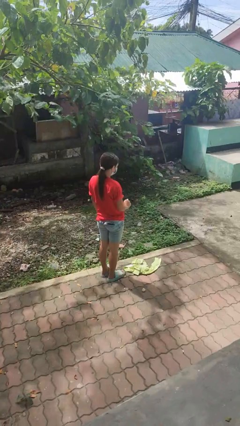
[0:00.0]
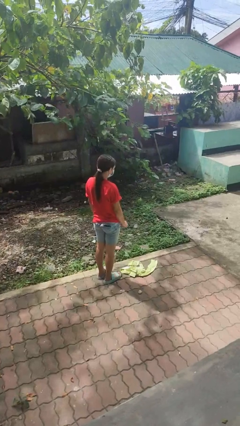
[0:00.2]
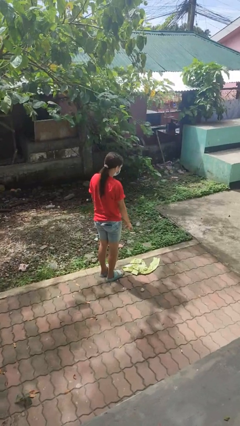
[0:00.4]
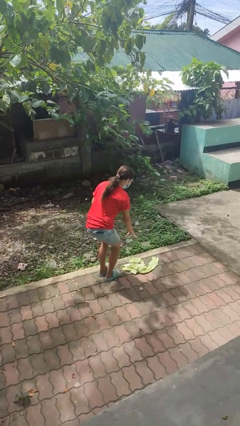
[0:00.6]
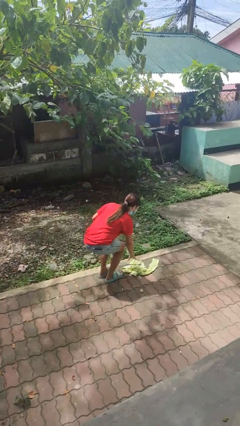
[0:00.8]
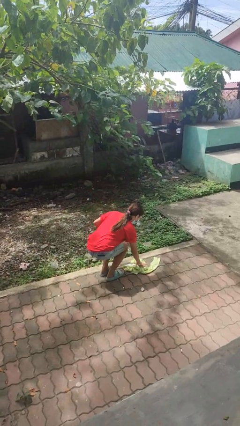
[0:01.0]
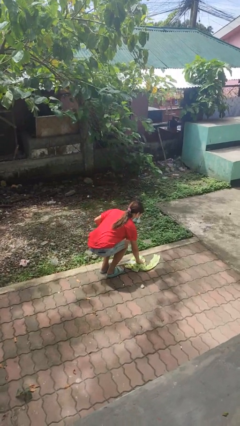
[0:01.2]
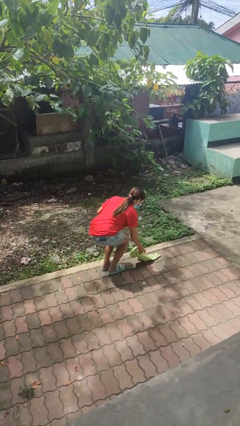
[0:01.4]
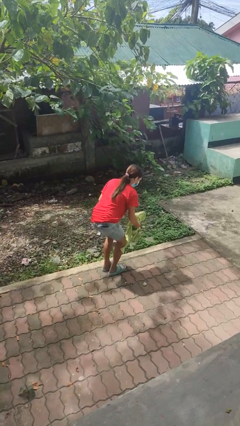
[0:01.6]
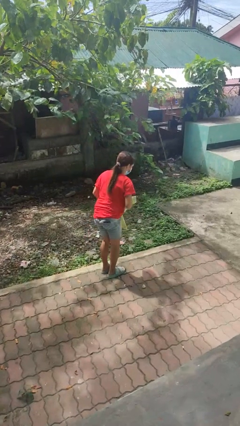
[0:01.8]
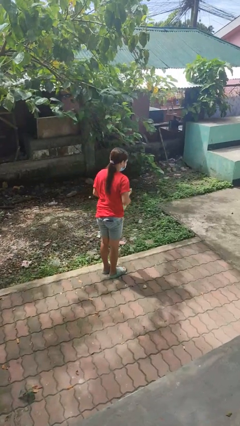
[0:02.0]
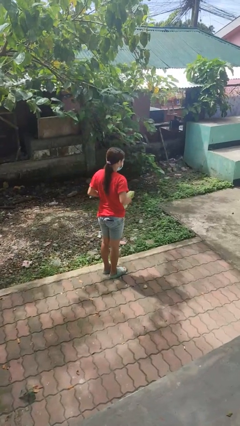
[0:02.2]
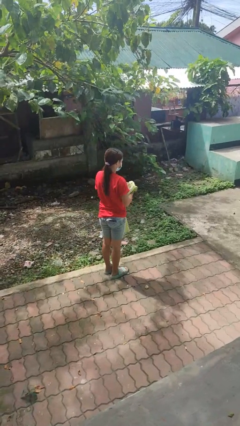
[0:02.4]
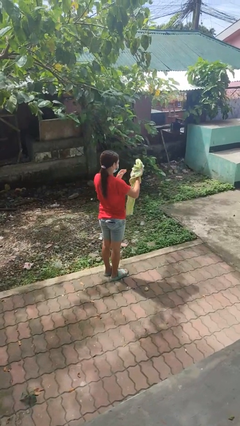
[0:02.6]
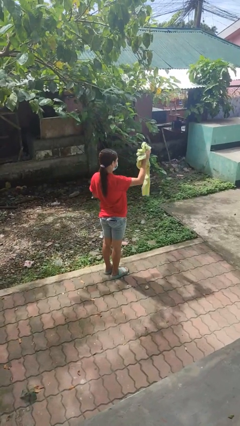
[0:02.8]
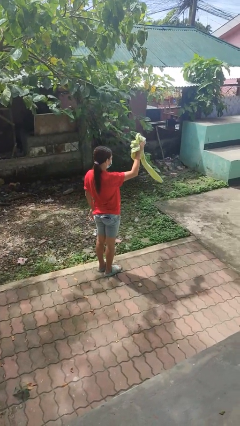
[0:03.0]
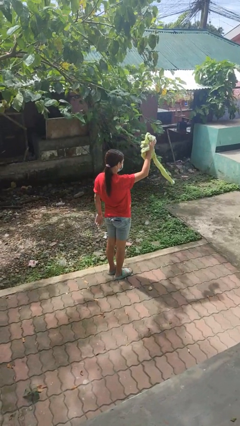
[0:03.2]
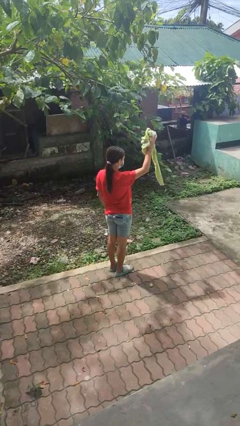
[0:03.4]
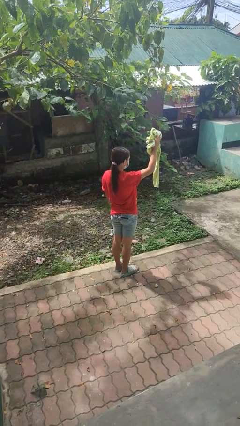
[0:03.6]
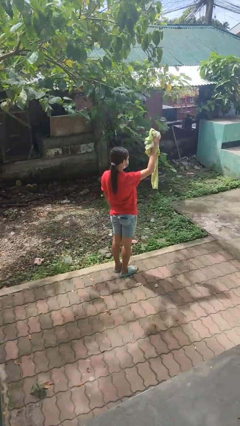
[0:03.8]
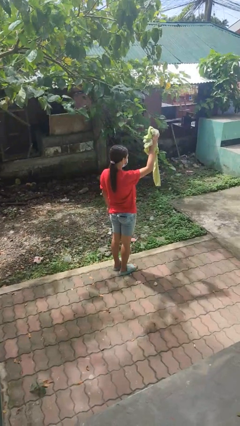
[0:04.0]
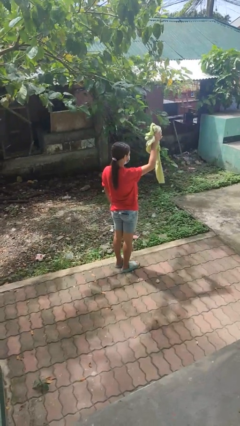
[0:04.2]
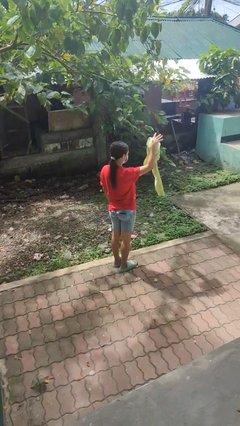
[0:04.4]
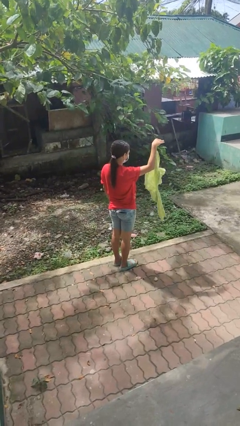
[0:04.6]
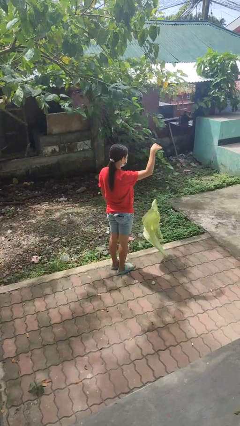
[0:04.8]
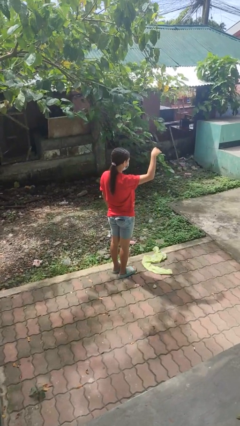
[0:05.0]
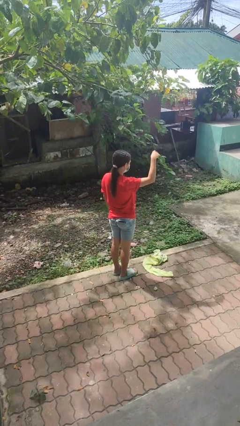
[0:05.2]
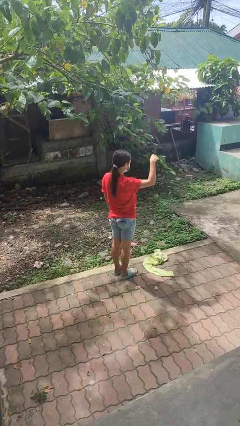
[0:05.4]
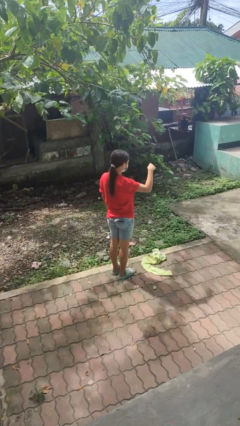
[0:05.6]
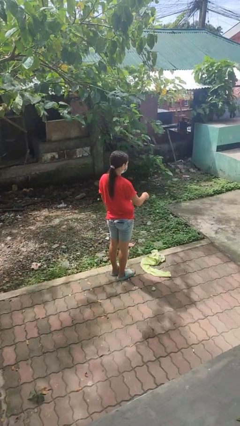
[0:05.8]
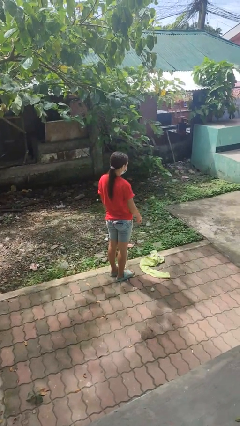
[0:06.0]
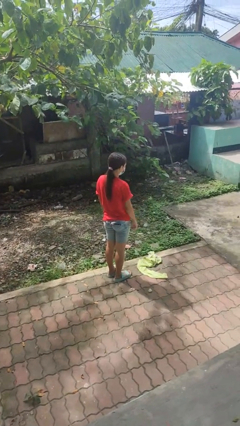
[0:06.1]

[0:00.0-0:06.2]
person picks up object from floor

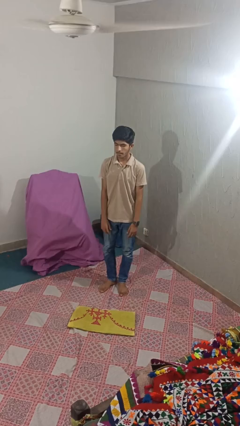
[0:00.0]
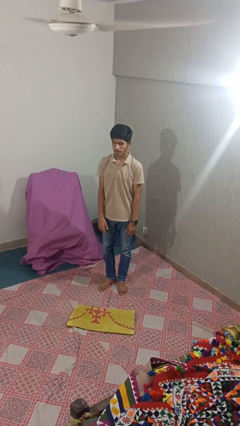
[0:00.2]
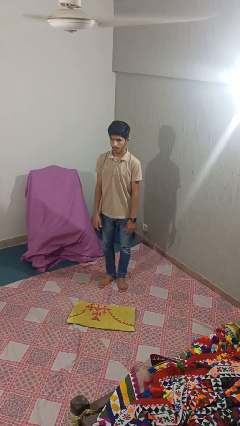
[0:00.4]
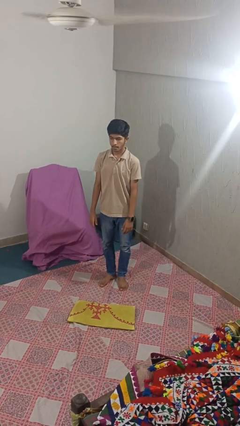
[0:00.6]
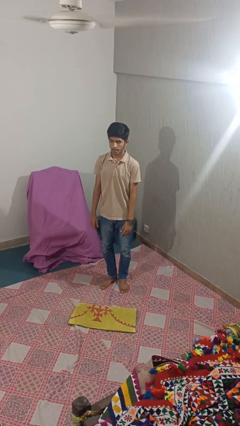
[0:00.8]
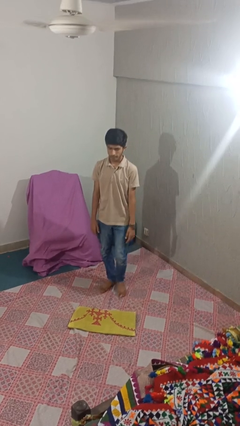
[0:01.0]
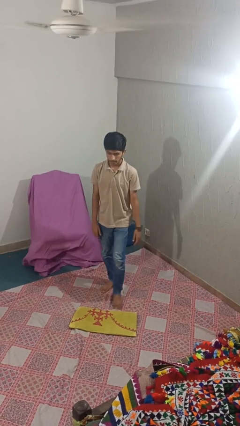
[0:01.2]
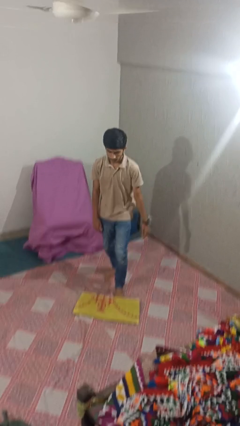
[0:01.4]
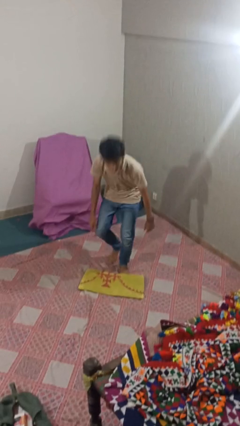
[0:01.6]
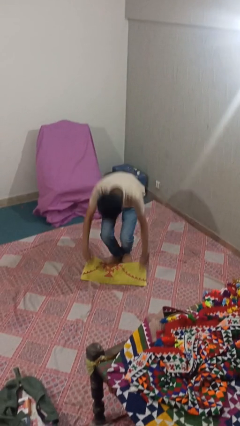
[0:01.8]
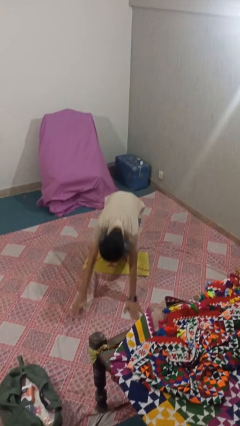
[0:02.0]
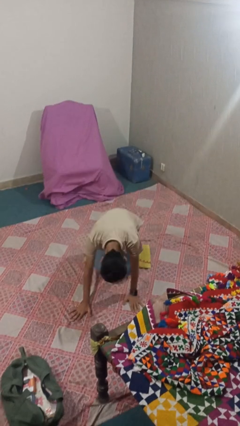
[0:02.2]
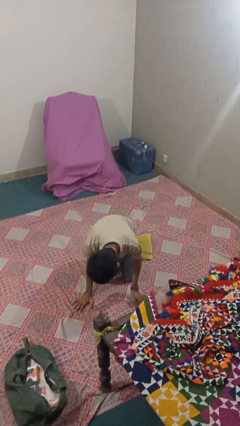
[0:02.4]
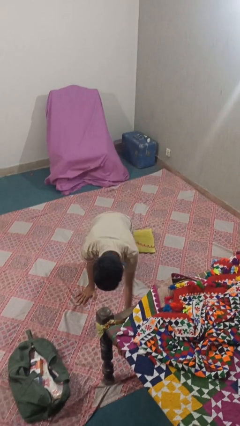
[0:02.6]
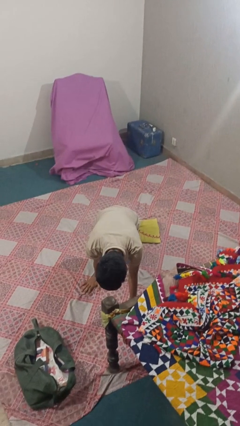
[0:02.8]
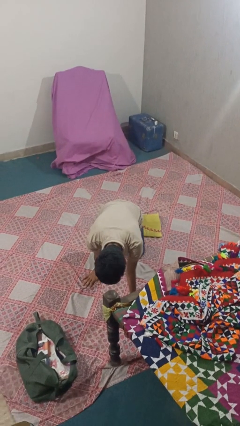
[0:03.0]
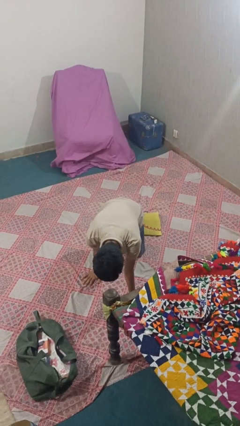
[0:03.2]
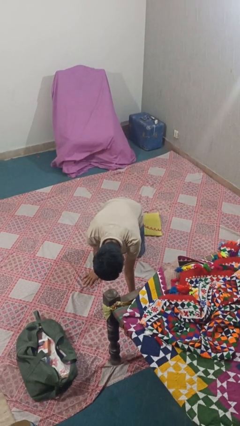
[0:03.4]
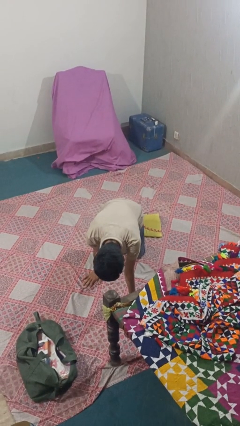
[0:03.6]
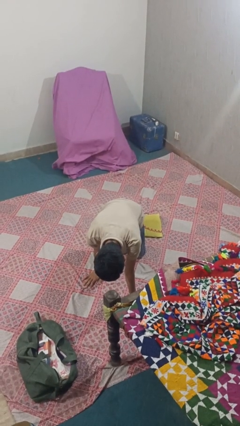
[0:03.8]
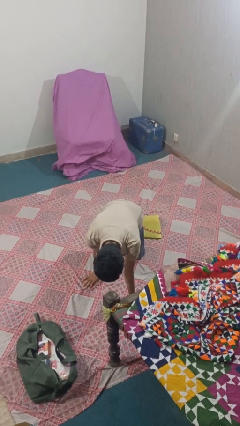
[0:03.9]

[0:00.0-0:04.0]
person trips on object on floor

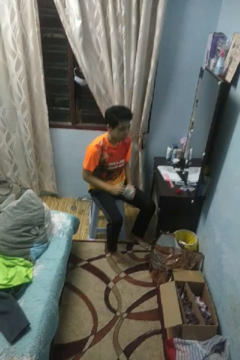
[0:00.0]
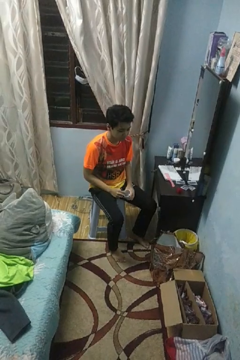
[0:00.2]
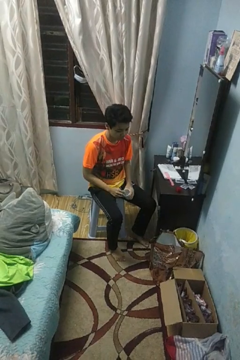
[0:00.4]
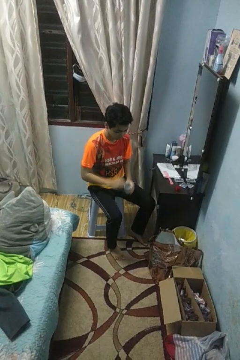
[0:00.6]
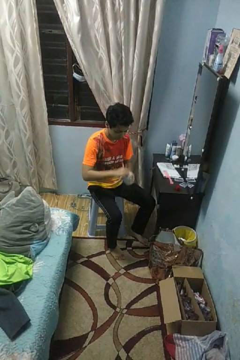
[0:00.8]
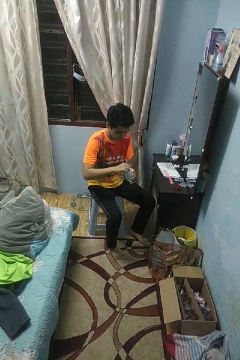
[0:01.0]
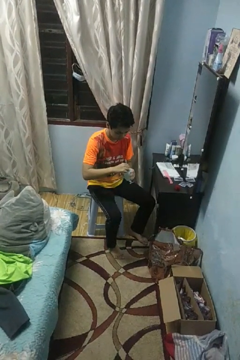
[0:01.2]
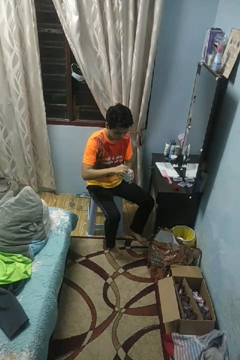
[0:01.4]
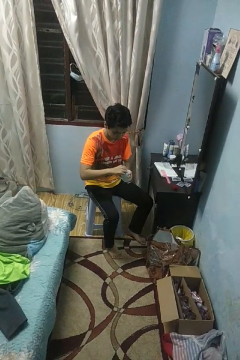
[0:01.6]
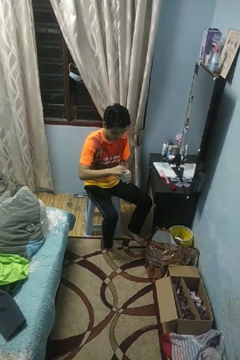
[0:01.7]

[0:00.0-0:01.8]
person stirs mug

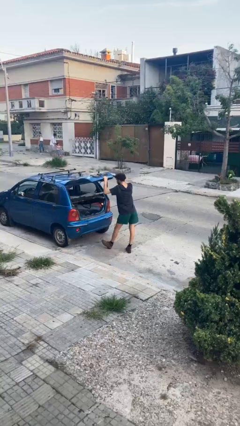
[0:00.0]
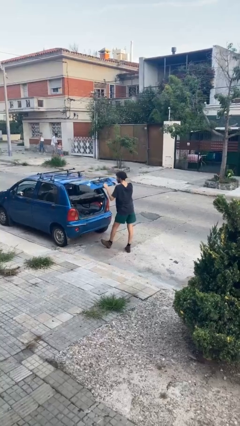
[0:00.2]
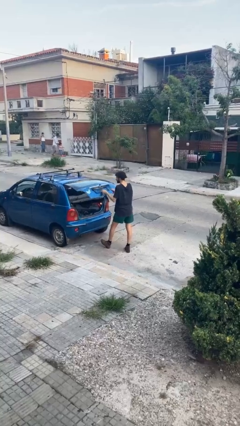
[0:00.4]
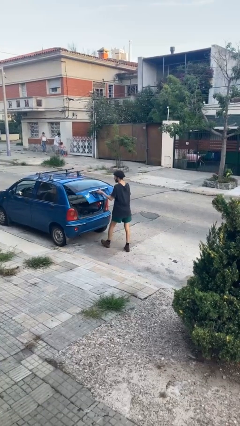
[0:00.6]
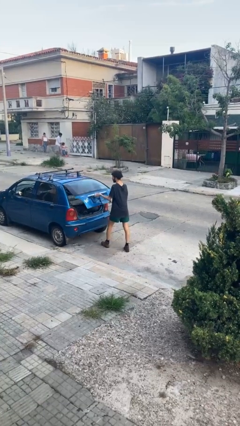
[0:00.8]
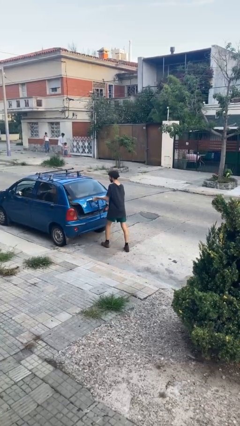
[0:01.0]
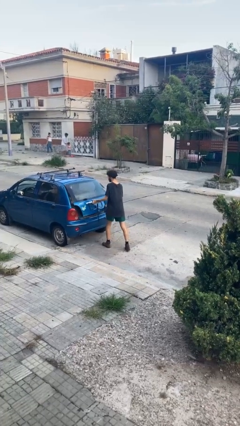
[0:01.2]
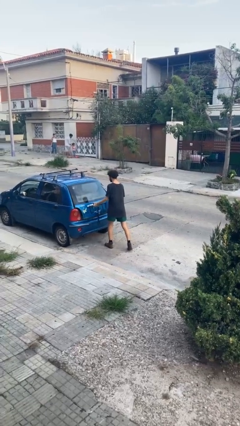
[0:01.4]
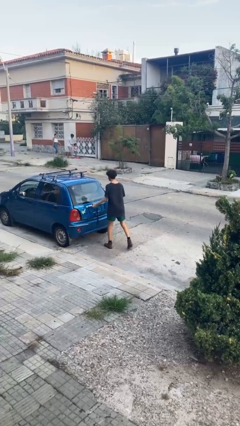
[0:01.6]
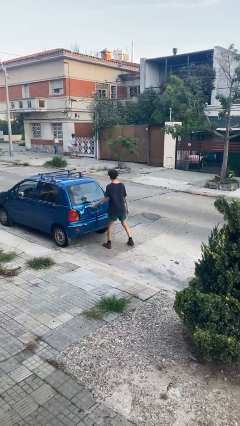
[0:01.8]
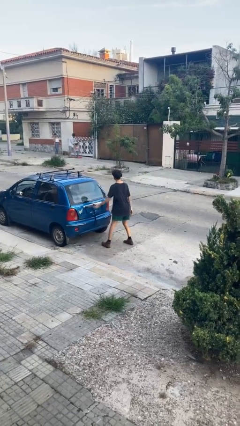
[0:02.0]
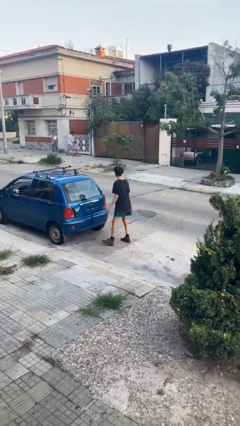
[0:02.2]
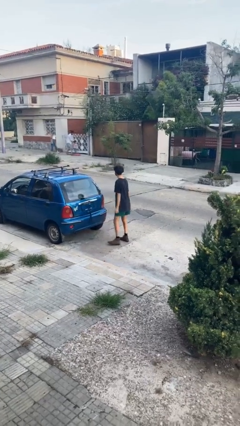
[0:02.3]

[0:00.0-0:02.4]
person closes car trunk

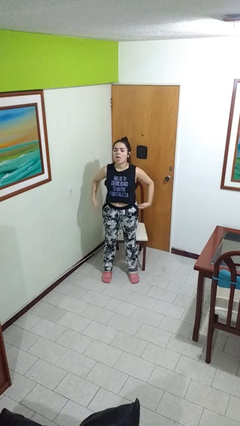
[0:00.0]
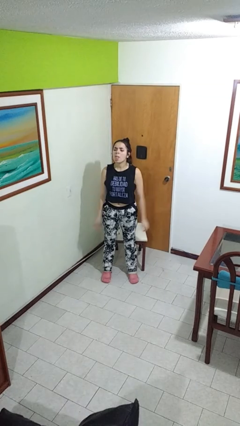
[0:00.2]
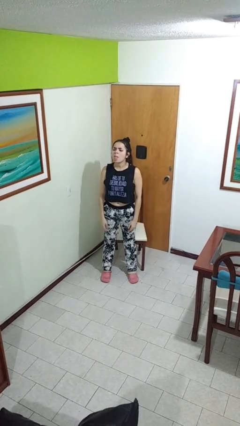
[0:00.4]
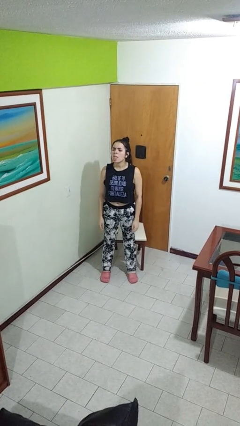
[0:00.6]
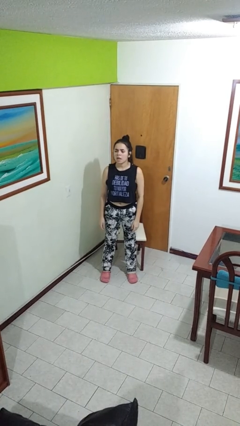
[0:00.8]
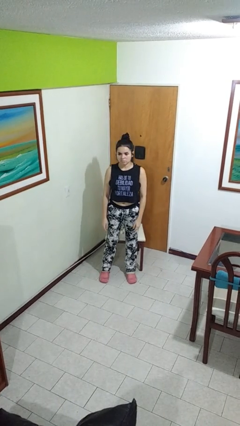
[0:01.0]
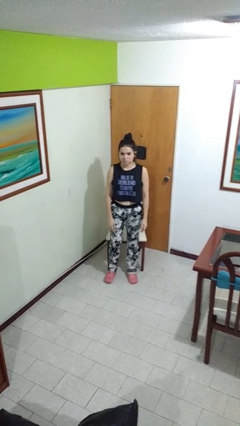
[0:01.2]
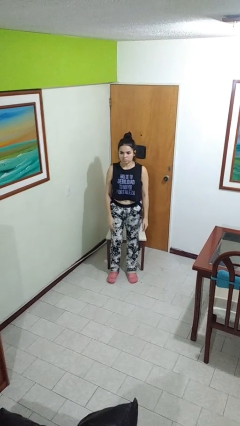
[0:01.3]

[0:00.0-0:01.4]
person sticks out tongue

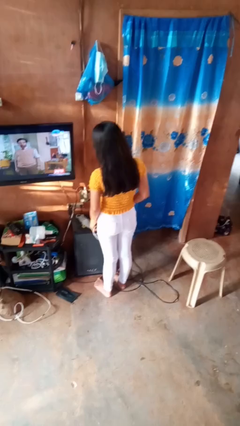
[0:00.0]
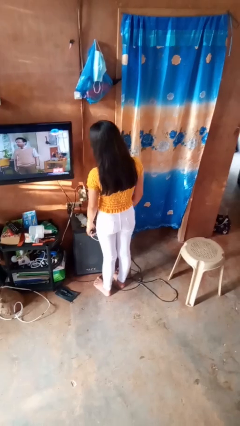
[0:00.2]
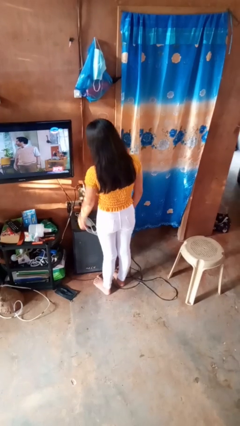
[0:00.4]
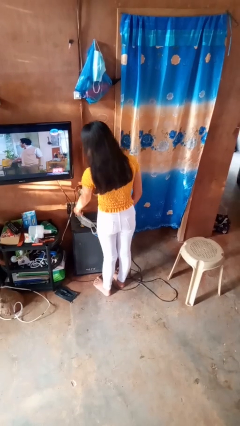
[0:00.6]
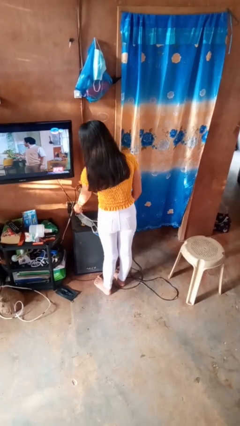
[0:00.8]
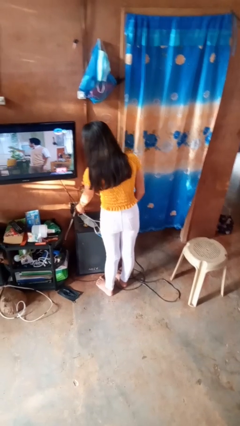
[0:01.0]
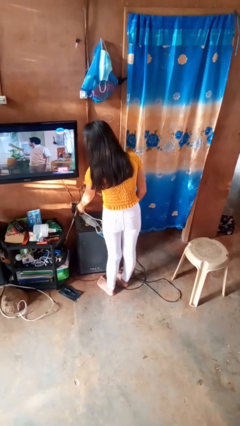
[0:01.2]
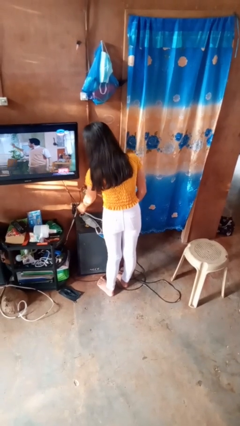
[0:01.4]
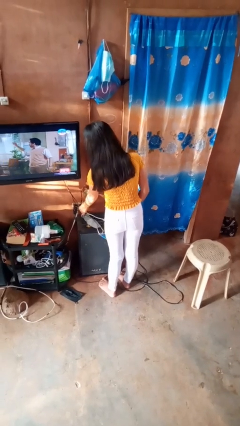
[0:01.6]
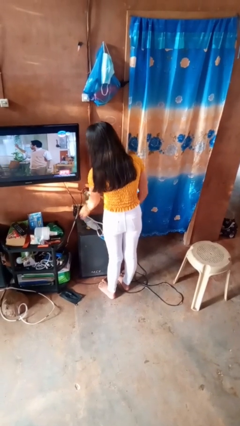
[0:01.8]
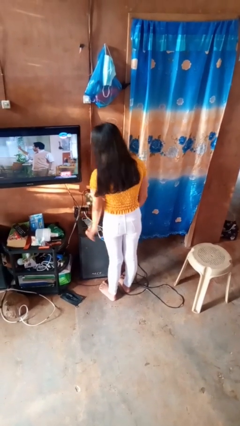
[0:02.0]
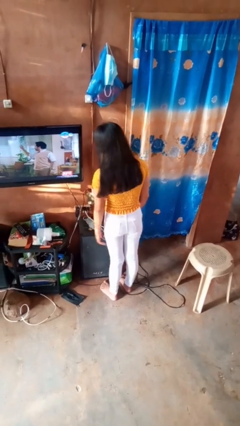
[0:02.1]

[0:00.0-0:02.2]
person plugs into electrical socket
